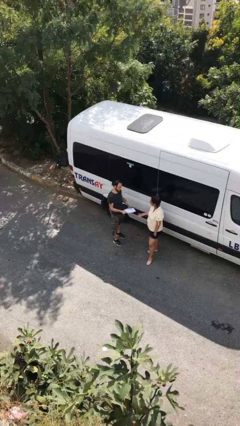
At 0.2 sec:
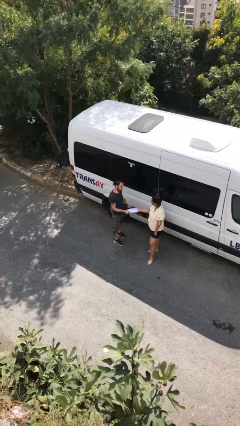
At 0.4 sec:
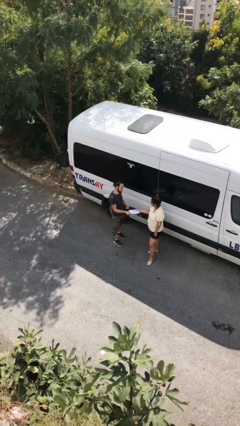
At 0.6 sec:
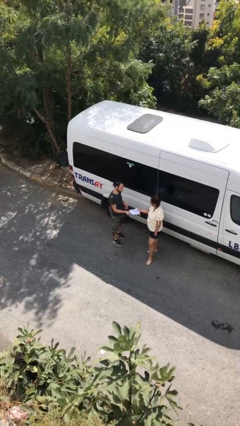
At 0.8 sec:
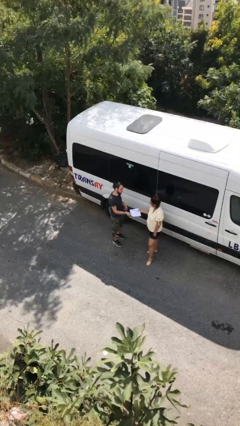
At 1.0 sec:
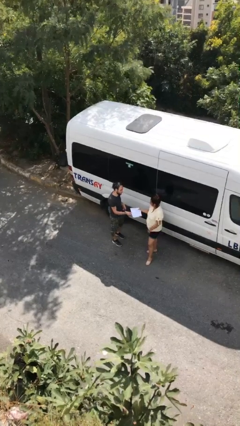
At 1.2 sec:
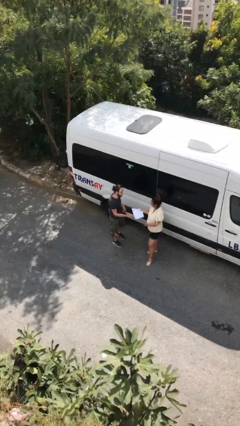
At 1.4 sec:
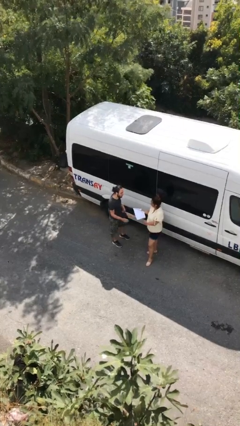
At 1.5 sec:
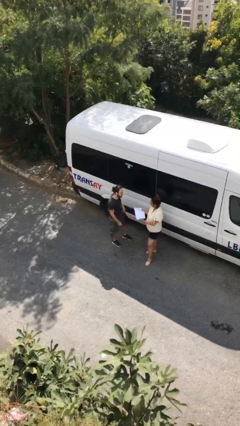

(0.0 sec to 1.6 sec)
person transfers object to person

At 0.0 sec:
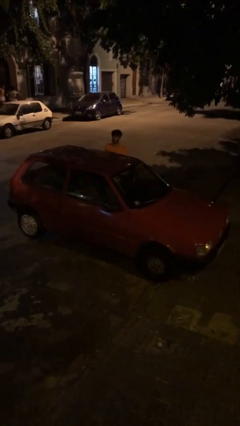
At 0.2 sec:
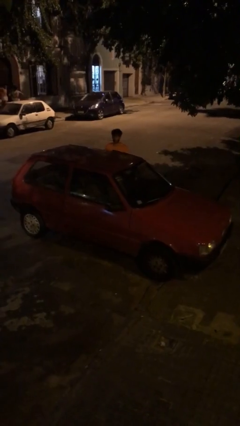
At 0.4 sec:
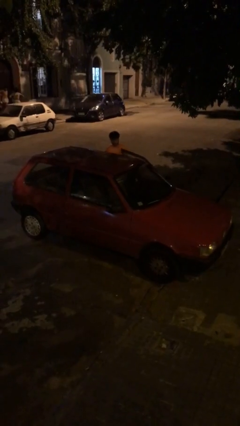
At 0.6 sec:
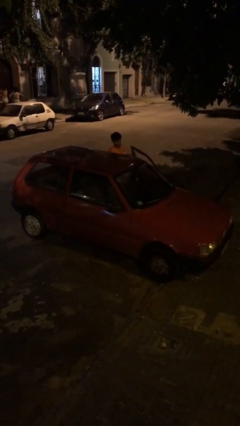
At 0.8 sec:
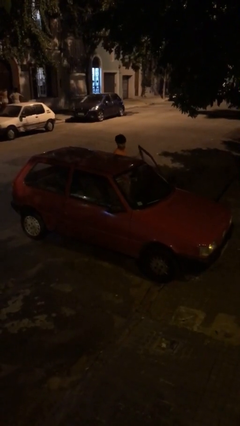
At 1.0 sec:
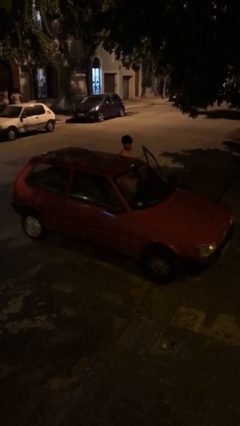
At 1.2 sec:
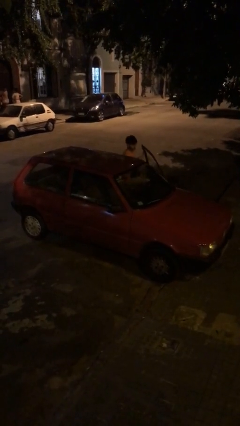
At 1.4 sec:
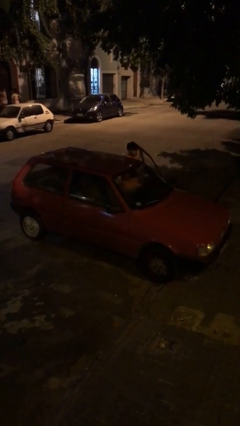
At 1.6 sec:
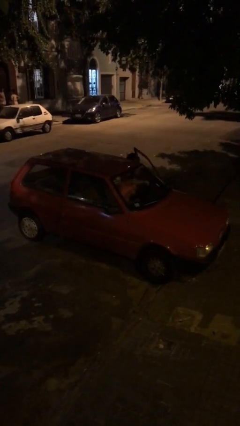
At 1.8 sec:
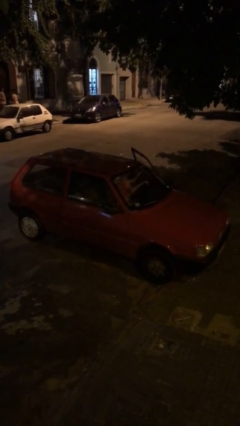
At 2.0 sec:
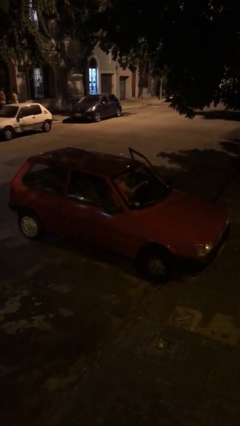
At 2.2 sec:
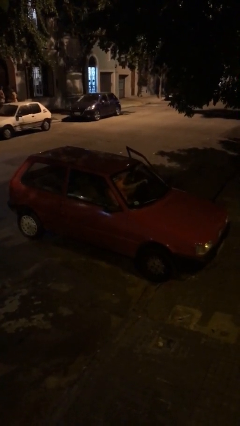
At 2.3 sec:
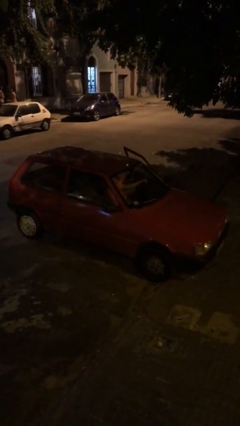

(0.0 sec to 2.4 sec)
car picks up person

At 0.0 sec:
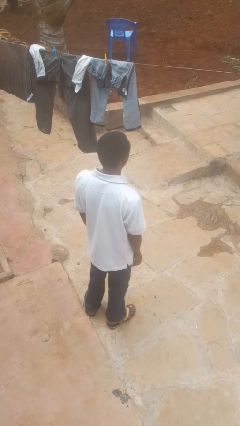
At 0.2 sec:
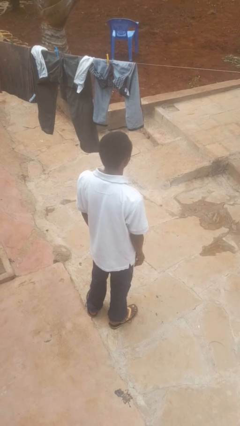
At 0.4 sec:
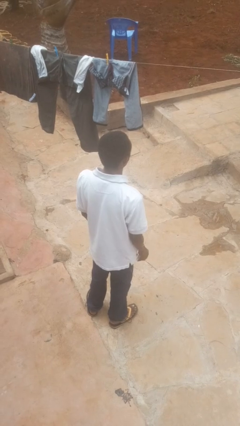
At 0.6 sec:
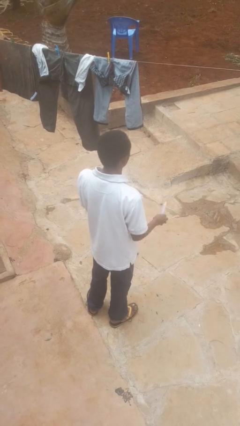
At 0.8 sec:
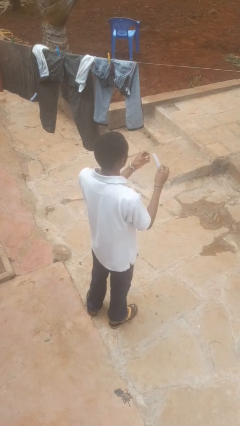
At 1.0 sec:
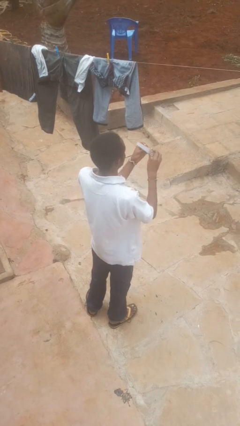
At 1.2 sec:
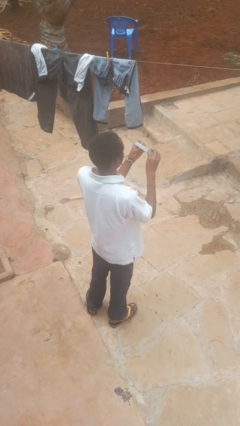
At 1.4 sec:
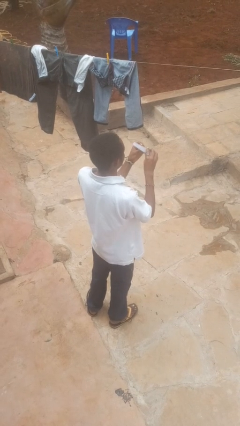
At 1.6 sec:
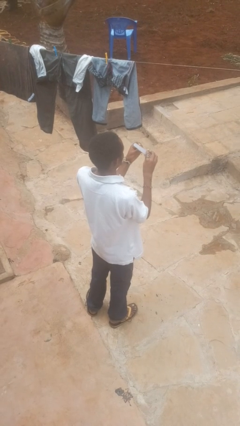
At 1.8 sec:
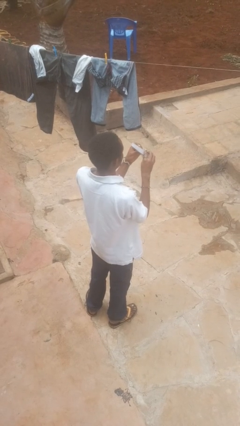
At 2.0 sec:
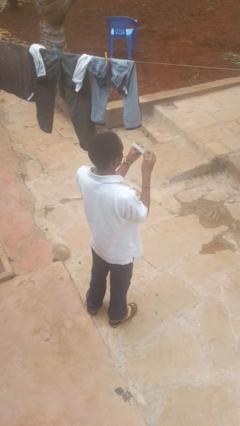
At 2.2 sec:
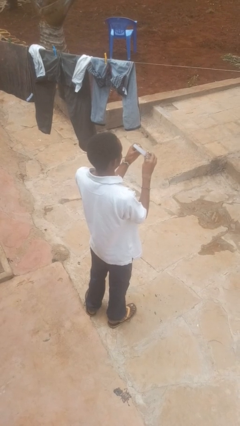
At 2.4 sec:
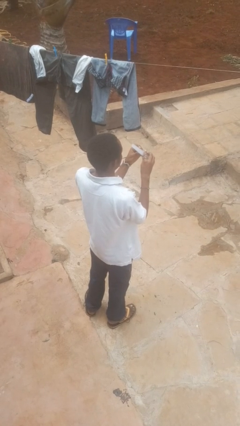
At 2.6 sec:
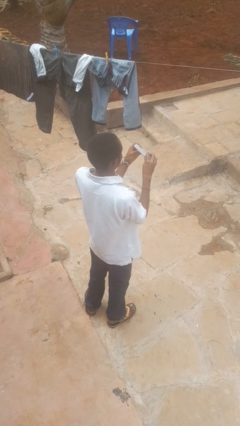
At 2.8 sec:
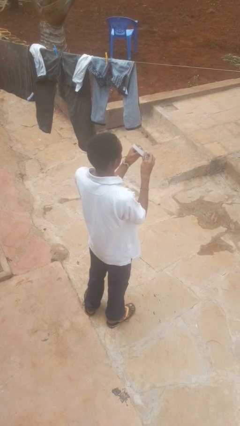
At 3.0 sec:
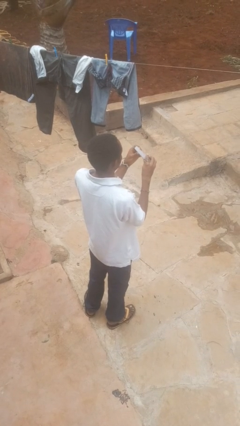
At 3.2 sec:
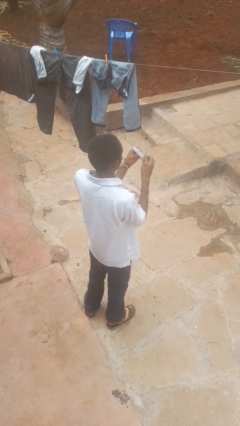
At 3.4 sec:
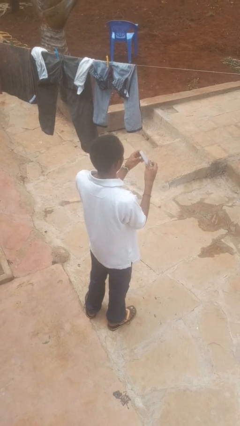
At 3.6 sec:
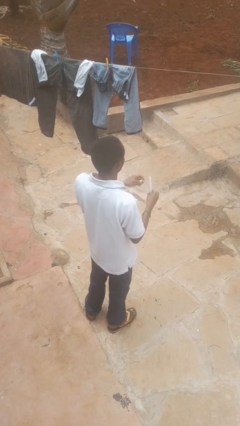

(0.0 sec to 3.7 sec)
person files fingernails

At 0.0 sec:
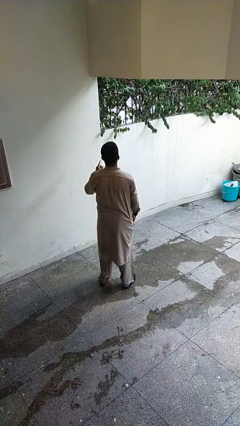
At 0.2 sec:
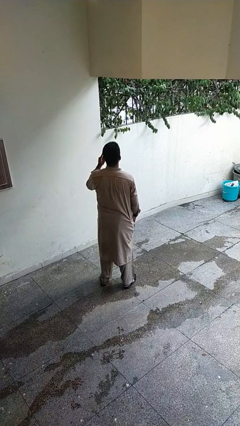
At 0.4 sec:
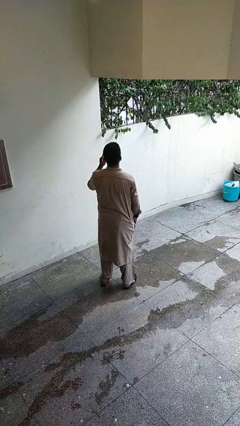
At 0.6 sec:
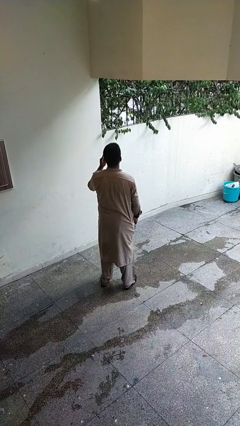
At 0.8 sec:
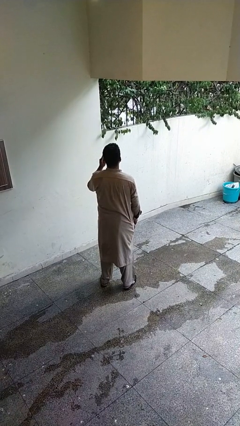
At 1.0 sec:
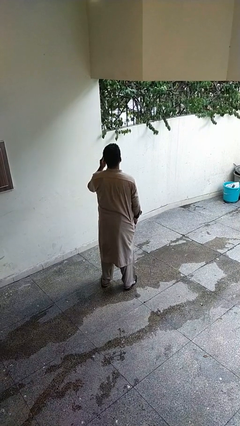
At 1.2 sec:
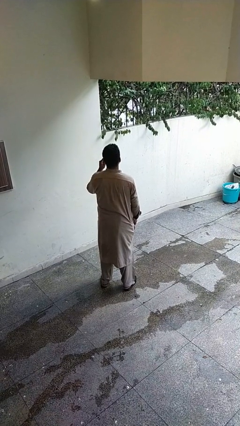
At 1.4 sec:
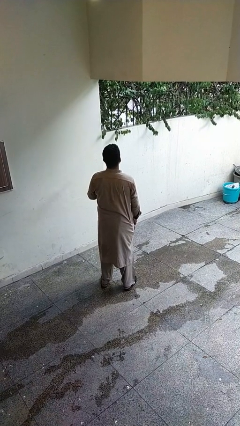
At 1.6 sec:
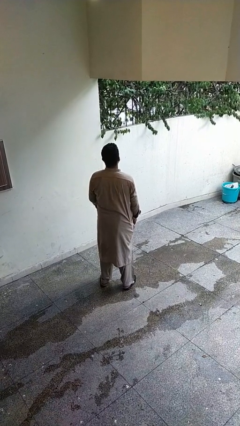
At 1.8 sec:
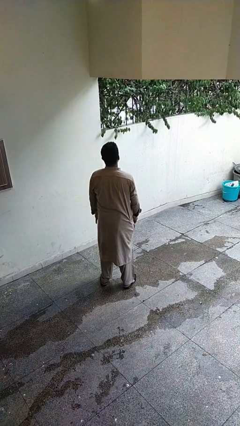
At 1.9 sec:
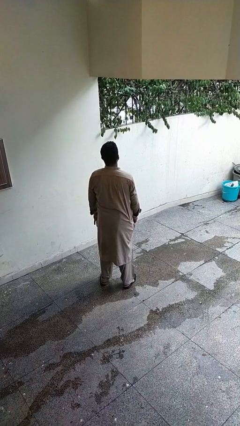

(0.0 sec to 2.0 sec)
person gestures number one

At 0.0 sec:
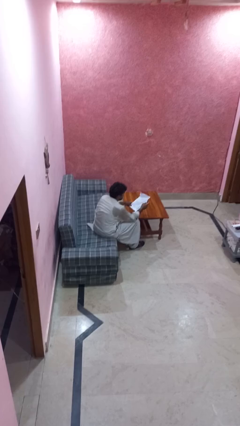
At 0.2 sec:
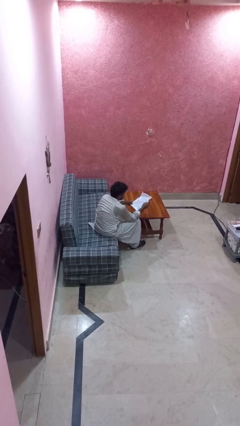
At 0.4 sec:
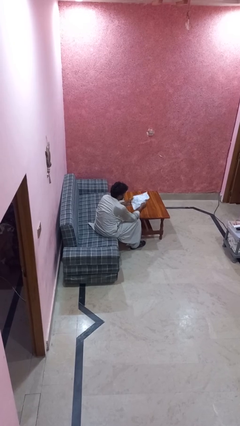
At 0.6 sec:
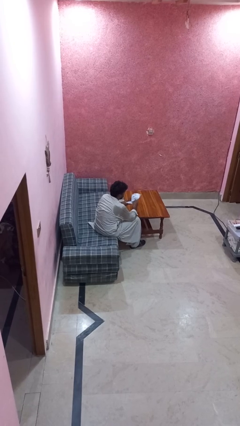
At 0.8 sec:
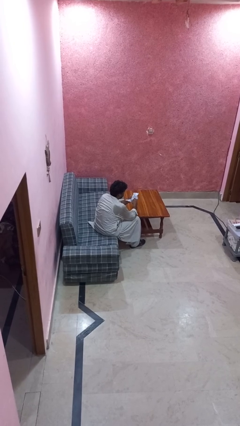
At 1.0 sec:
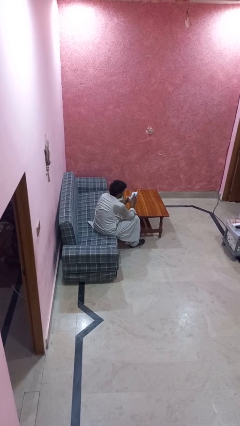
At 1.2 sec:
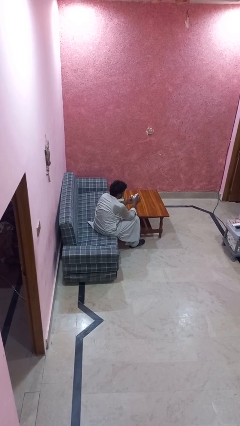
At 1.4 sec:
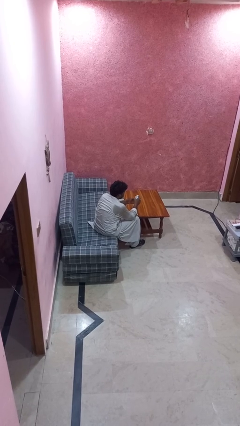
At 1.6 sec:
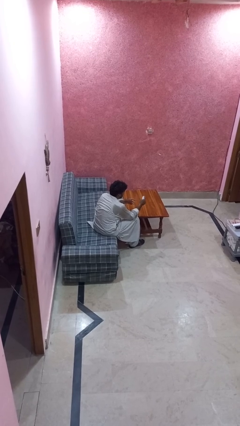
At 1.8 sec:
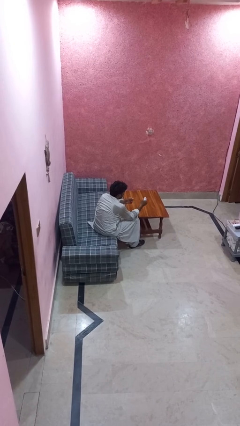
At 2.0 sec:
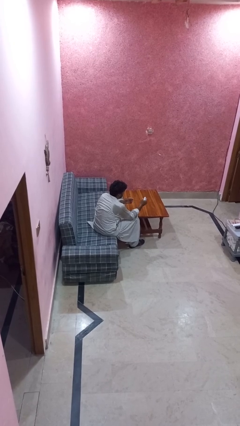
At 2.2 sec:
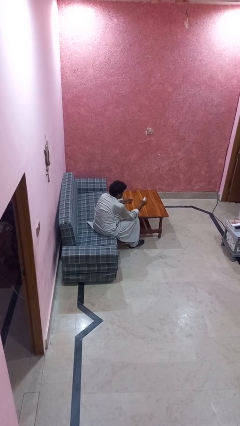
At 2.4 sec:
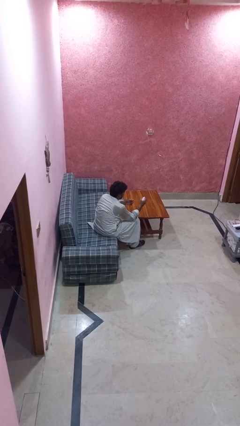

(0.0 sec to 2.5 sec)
person crumples paper

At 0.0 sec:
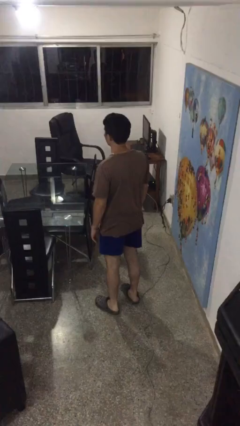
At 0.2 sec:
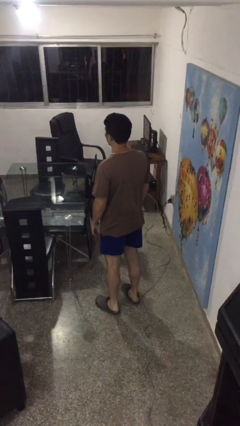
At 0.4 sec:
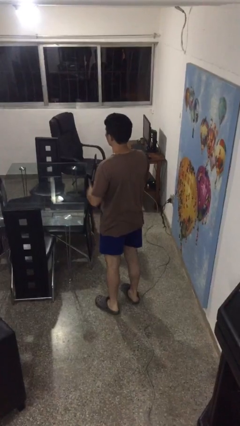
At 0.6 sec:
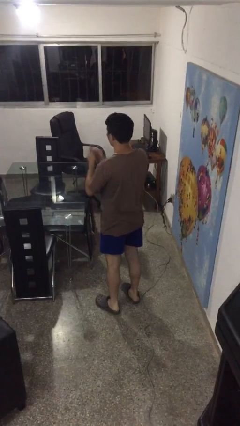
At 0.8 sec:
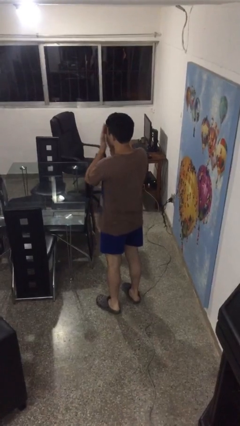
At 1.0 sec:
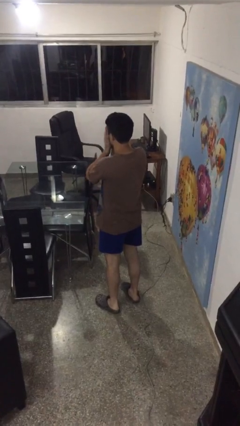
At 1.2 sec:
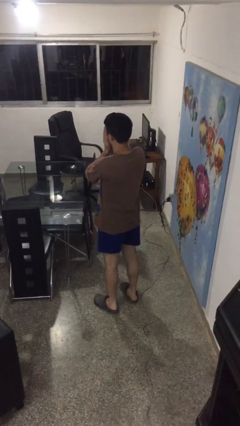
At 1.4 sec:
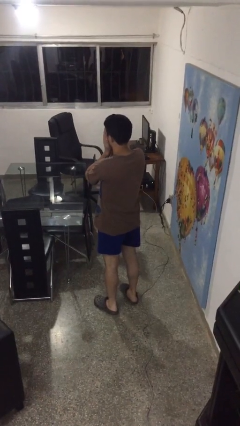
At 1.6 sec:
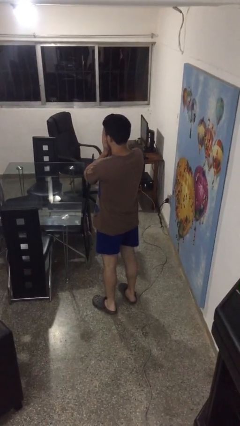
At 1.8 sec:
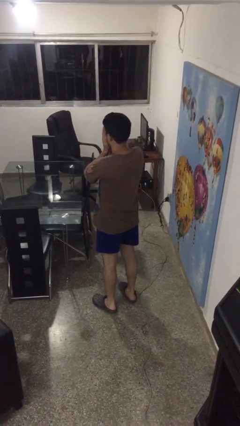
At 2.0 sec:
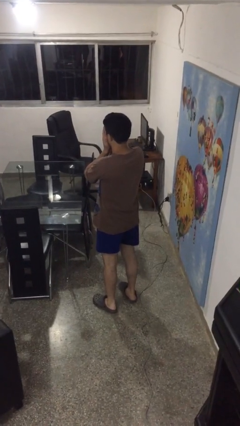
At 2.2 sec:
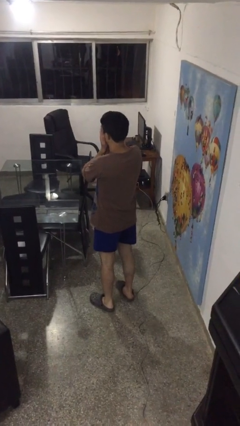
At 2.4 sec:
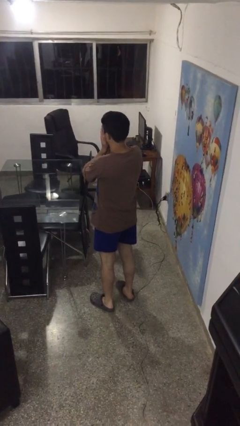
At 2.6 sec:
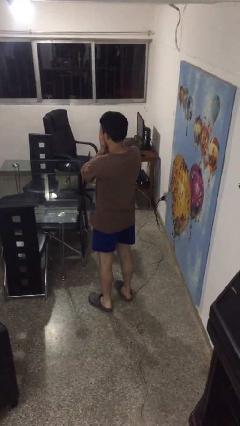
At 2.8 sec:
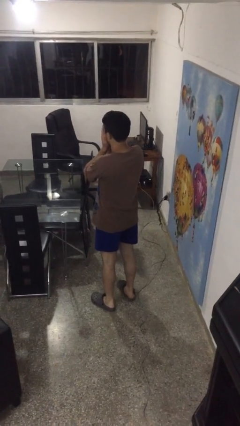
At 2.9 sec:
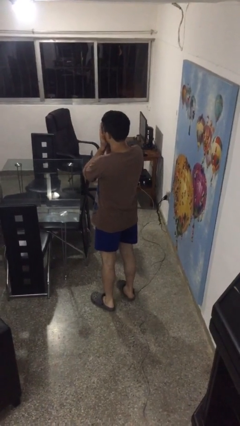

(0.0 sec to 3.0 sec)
person covers face with hands

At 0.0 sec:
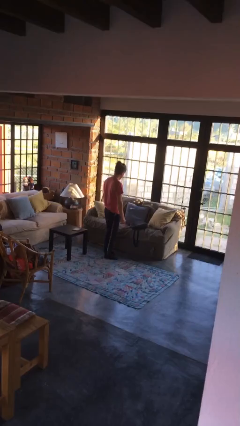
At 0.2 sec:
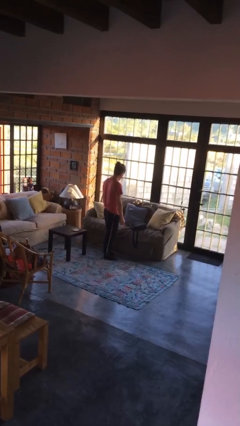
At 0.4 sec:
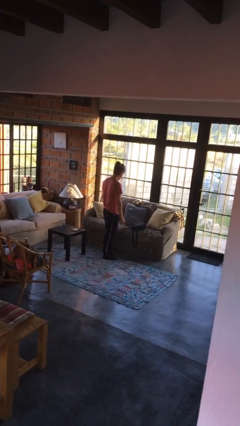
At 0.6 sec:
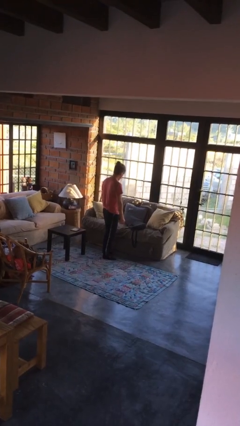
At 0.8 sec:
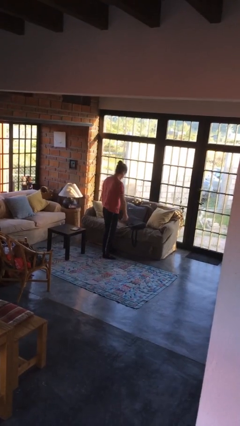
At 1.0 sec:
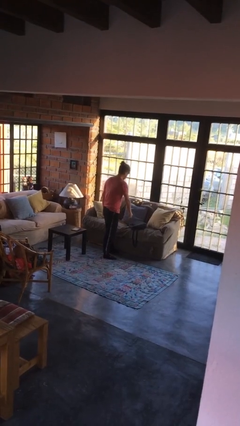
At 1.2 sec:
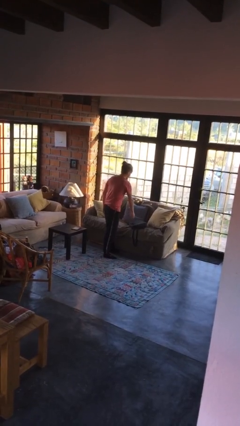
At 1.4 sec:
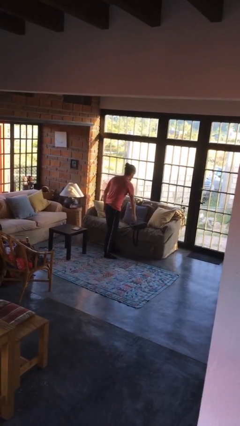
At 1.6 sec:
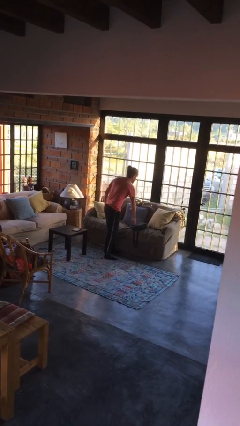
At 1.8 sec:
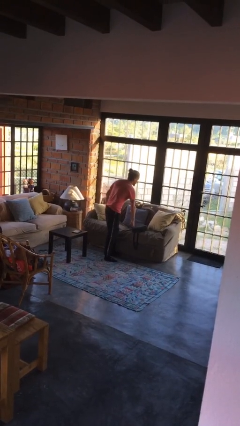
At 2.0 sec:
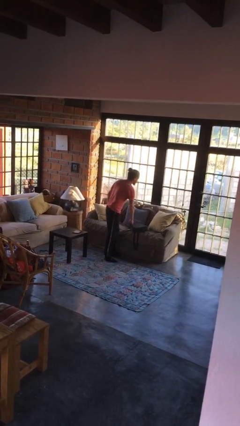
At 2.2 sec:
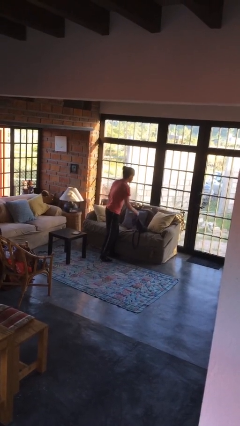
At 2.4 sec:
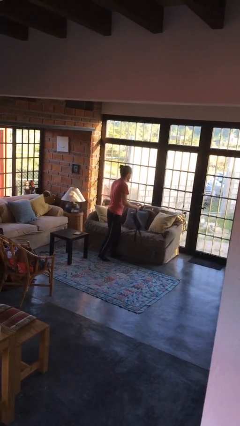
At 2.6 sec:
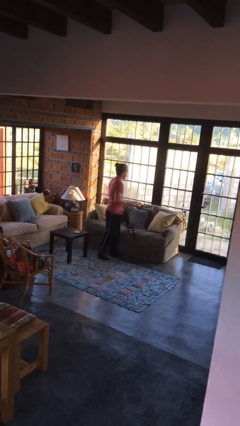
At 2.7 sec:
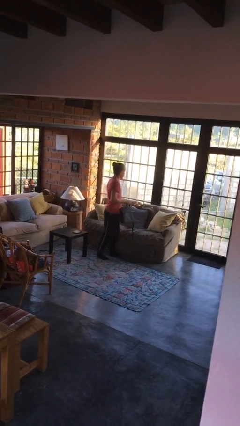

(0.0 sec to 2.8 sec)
person picks up object from couch
